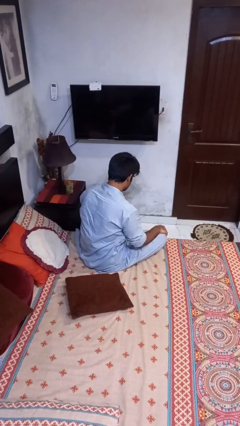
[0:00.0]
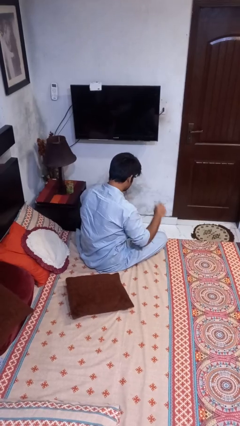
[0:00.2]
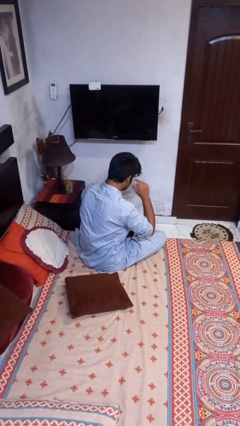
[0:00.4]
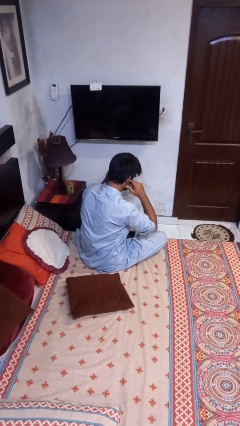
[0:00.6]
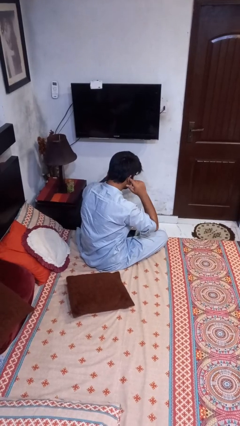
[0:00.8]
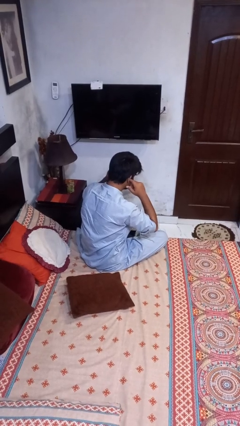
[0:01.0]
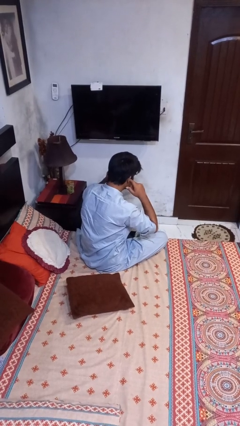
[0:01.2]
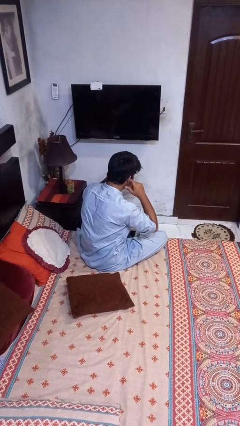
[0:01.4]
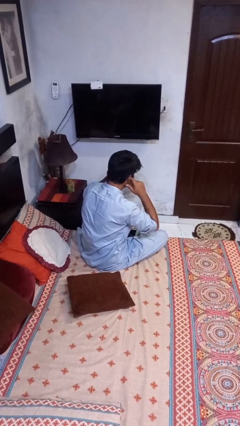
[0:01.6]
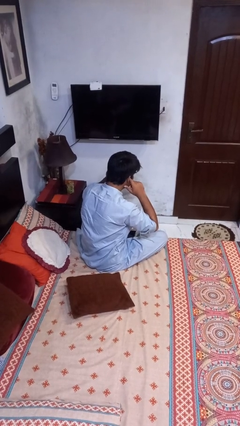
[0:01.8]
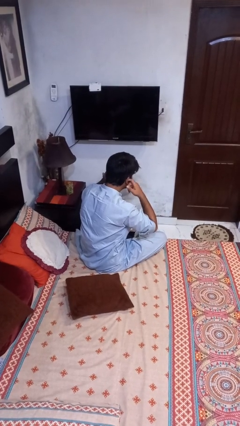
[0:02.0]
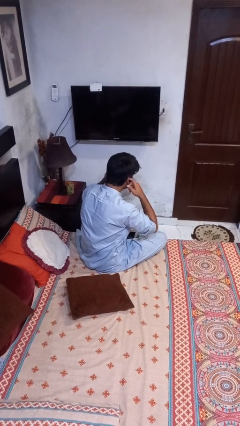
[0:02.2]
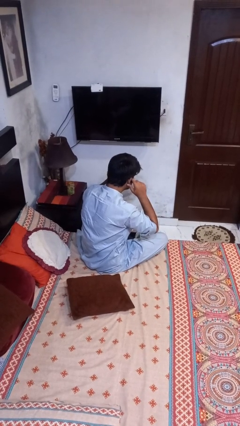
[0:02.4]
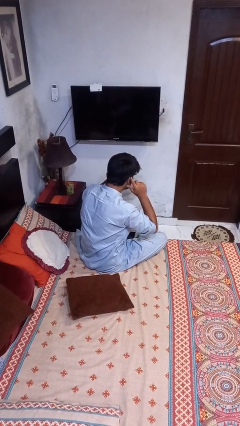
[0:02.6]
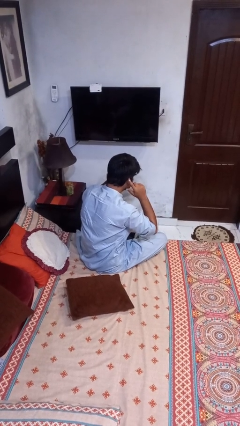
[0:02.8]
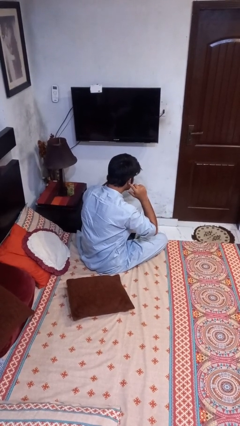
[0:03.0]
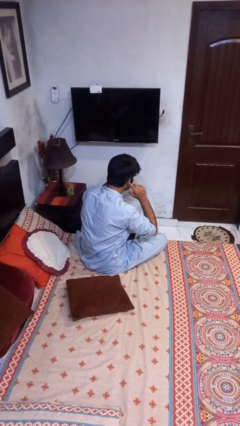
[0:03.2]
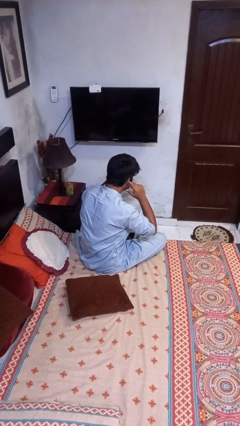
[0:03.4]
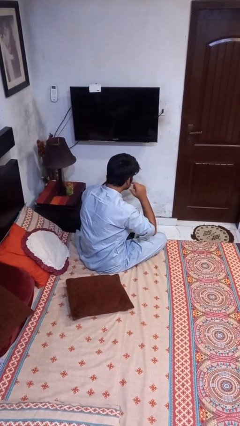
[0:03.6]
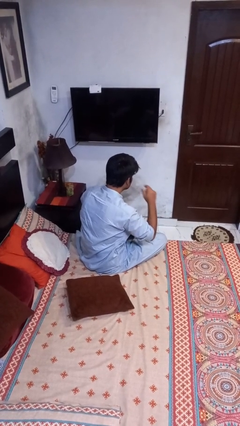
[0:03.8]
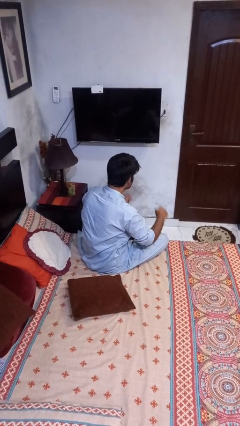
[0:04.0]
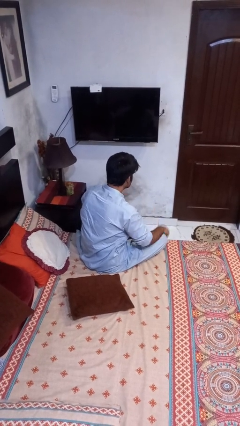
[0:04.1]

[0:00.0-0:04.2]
person puts fingers in ear

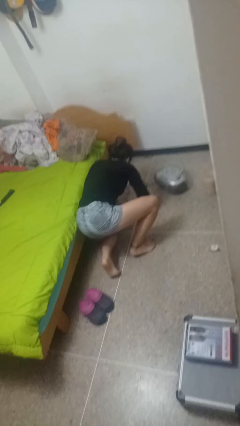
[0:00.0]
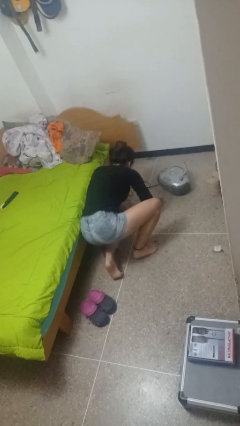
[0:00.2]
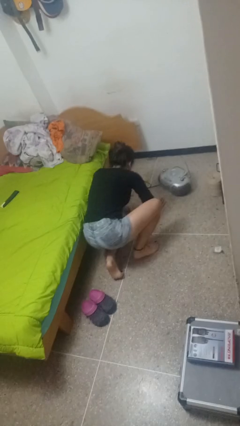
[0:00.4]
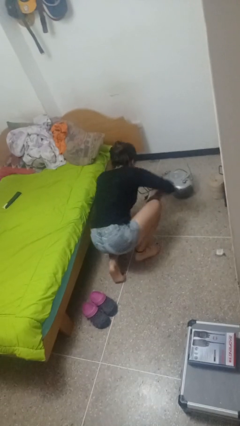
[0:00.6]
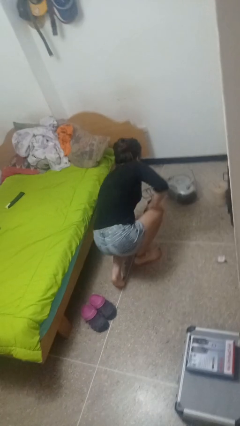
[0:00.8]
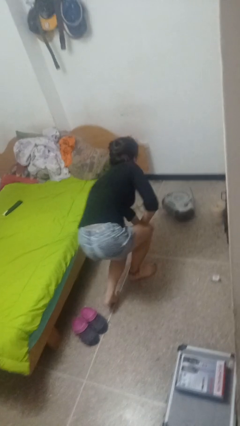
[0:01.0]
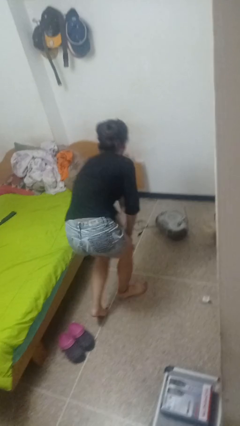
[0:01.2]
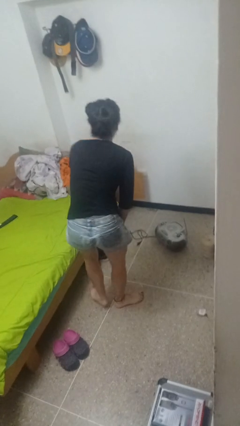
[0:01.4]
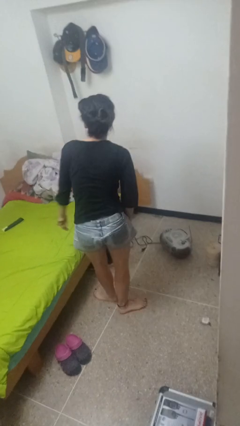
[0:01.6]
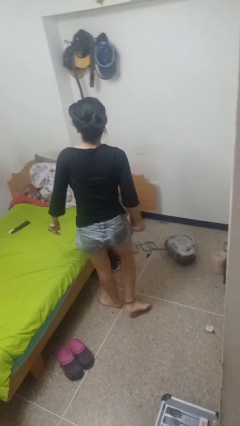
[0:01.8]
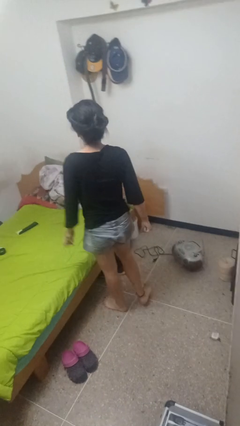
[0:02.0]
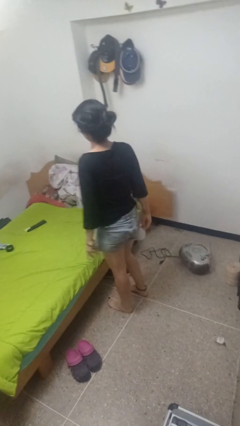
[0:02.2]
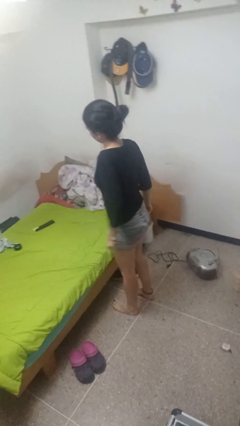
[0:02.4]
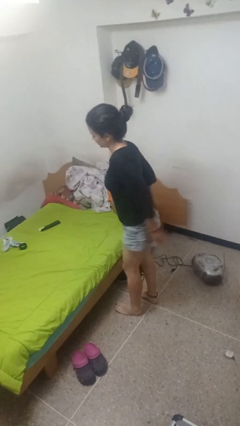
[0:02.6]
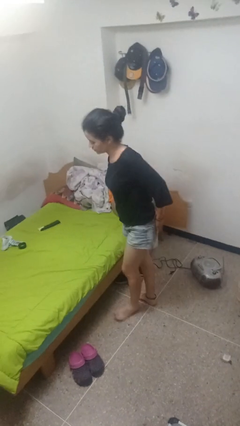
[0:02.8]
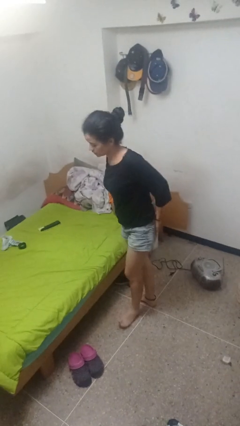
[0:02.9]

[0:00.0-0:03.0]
person stands up from floor

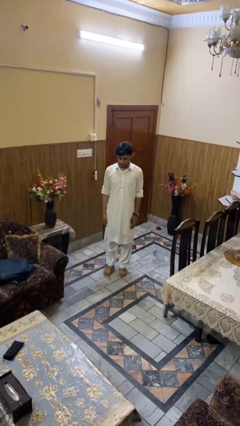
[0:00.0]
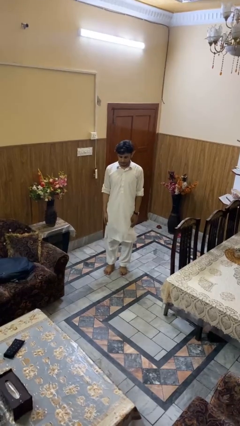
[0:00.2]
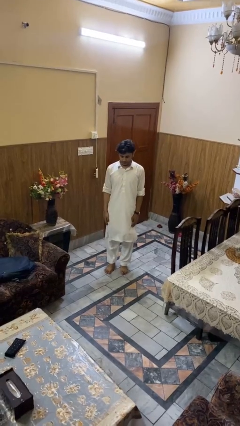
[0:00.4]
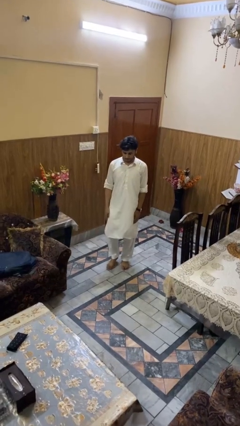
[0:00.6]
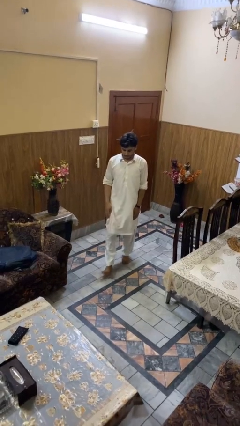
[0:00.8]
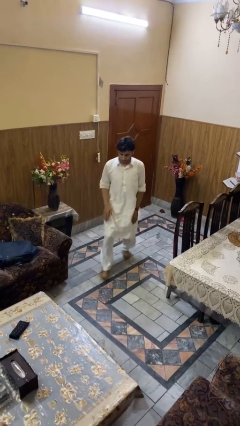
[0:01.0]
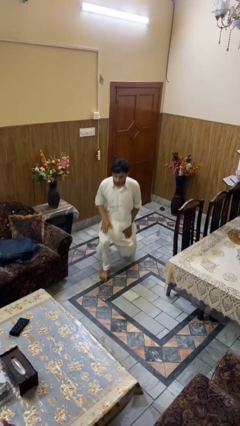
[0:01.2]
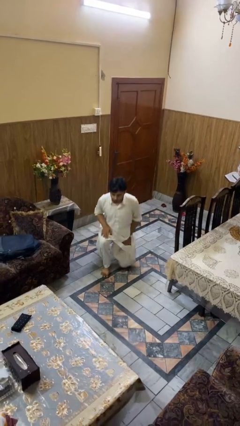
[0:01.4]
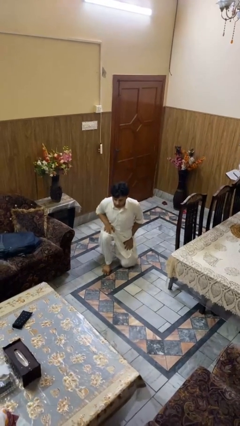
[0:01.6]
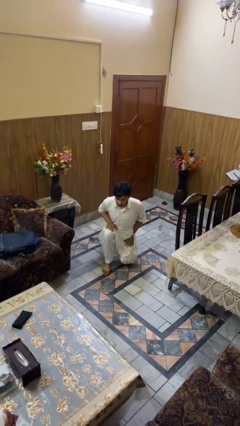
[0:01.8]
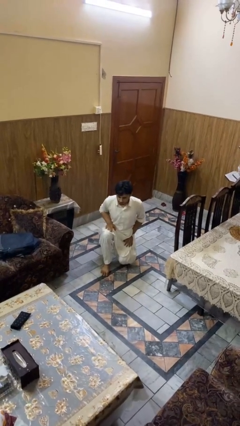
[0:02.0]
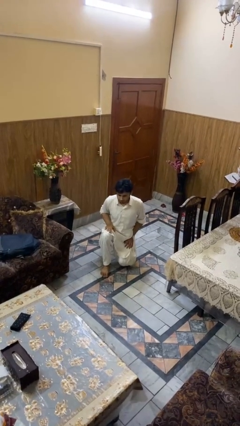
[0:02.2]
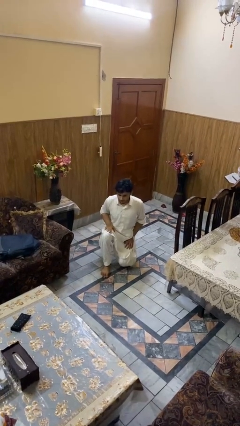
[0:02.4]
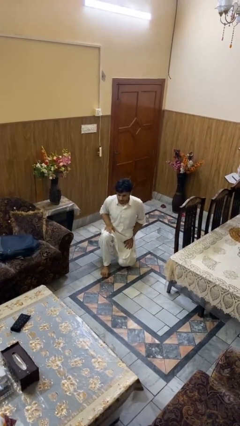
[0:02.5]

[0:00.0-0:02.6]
person kneels

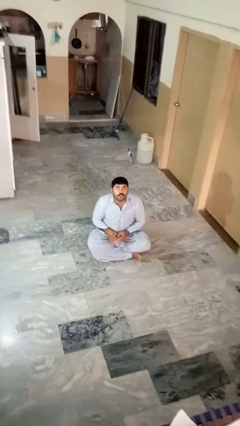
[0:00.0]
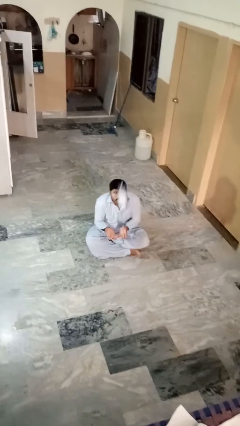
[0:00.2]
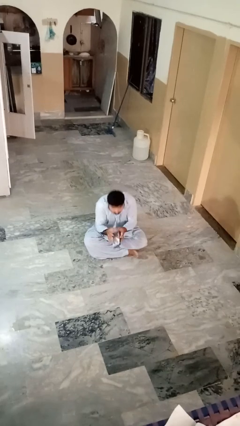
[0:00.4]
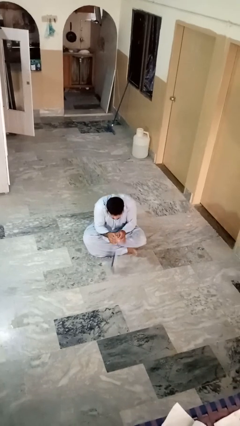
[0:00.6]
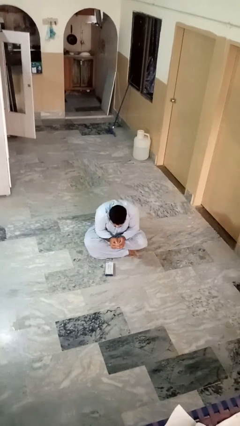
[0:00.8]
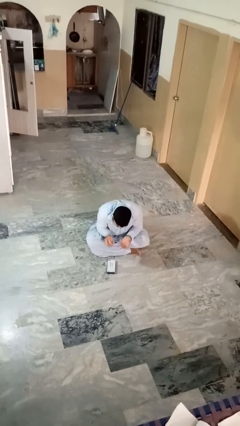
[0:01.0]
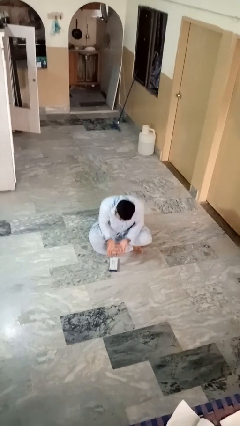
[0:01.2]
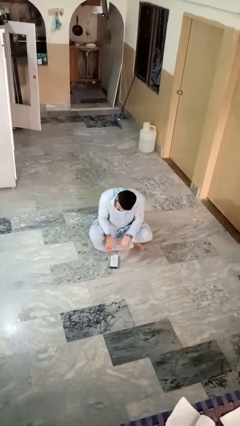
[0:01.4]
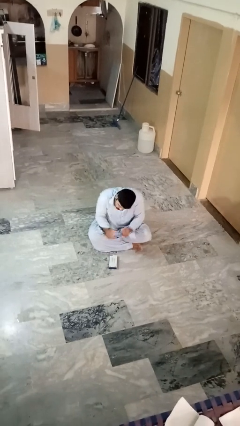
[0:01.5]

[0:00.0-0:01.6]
person catches dropped object

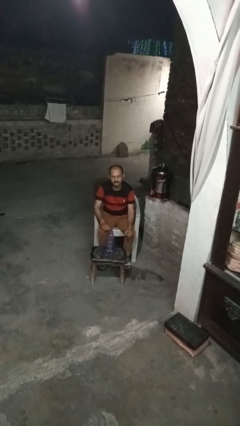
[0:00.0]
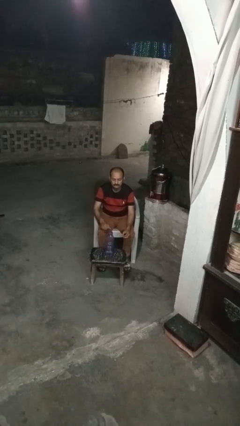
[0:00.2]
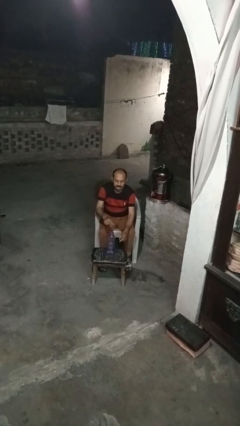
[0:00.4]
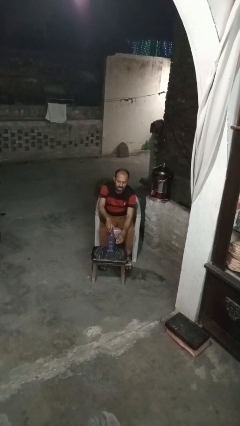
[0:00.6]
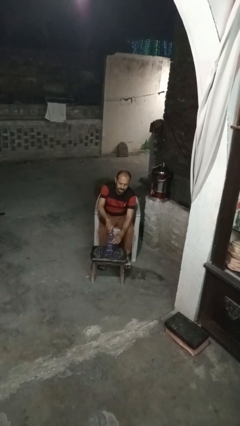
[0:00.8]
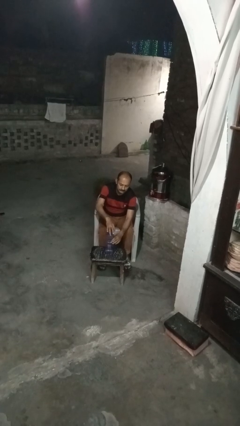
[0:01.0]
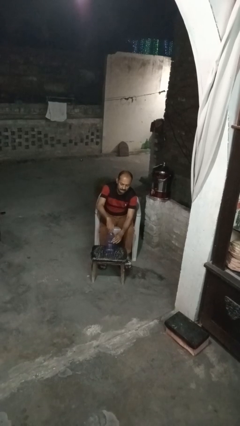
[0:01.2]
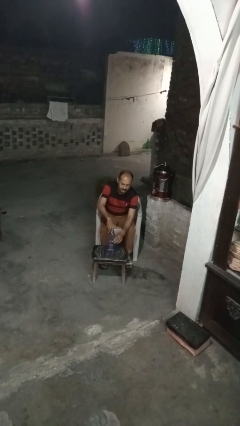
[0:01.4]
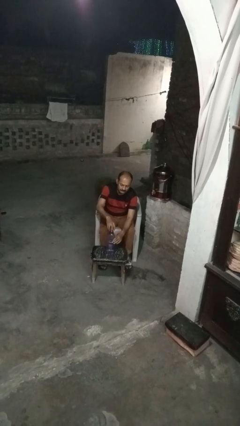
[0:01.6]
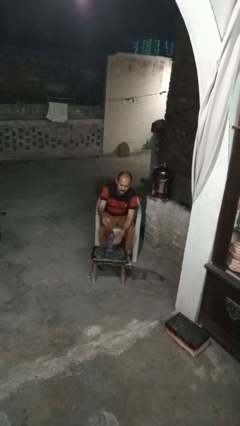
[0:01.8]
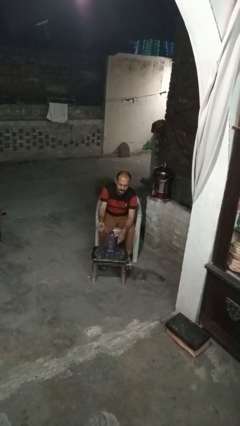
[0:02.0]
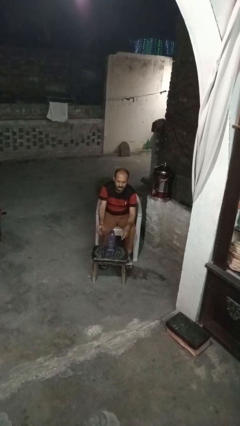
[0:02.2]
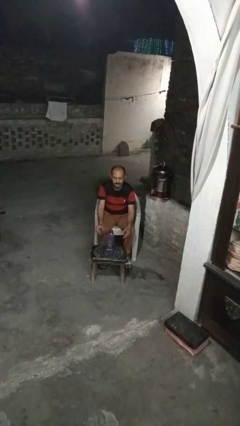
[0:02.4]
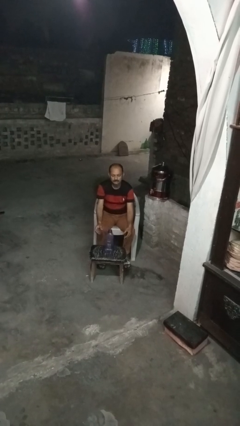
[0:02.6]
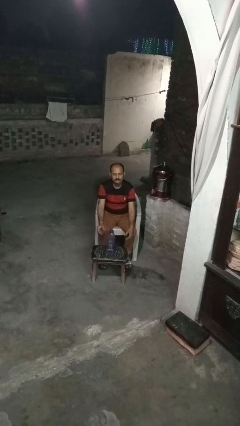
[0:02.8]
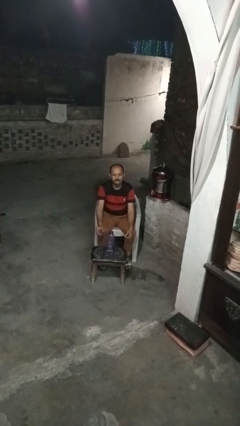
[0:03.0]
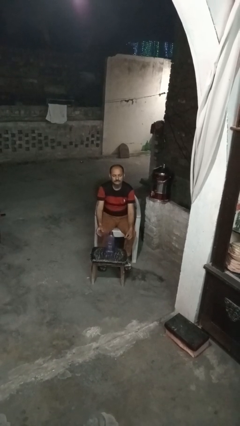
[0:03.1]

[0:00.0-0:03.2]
person unscrews lid from bottle

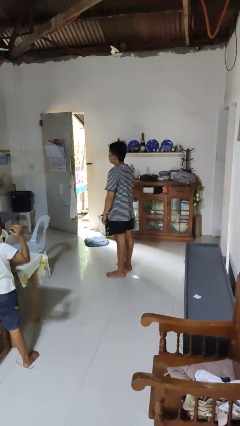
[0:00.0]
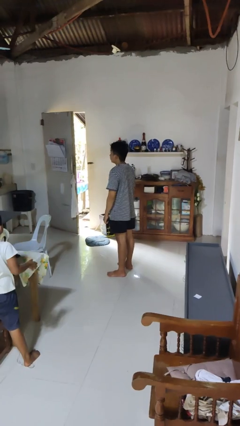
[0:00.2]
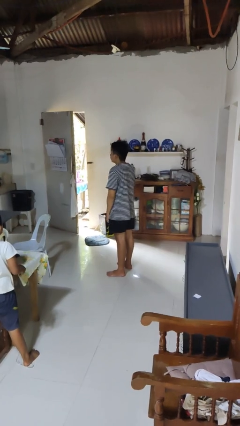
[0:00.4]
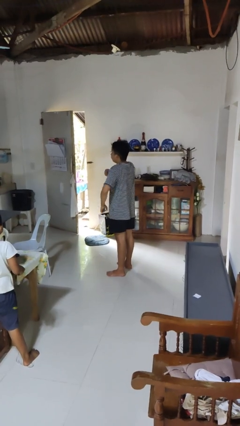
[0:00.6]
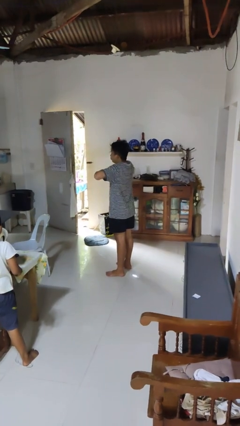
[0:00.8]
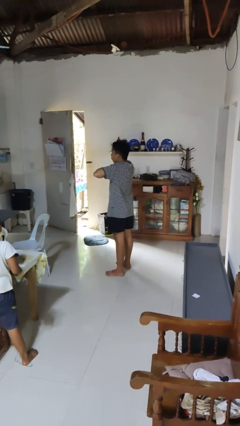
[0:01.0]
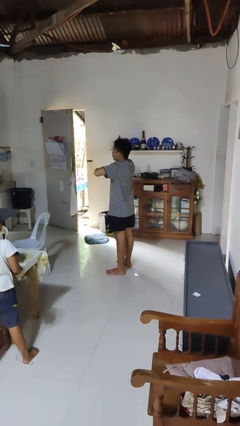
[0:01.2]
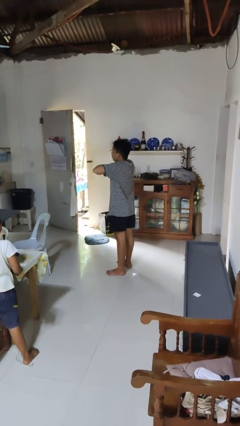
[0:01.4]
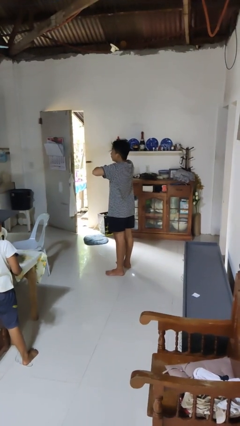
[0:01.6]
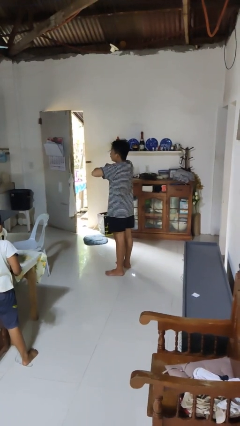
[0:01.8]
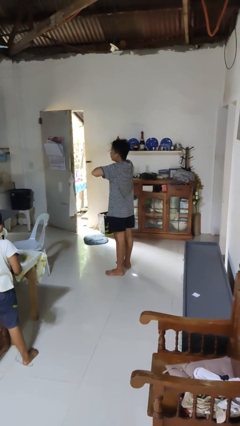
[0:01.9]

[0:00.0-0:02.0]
person drums on chest

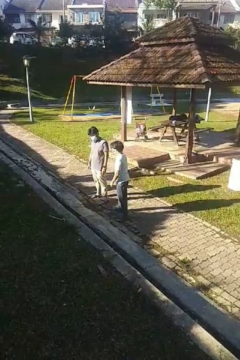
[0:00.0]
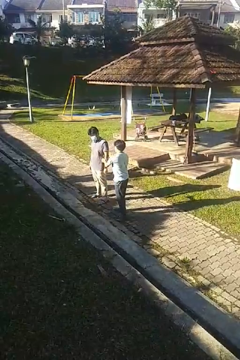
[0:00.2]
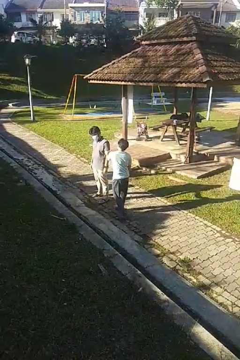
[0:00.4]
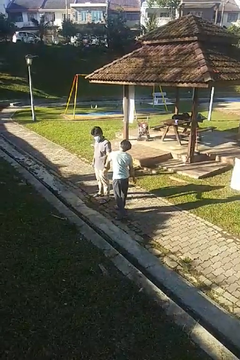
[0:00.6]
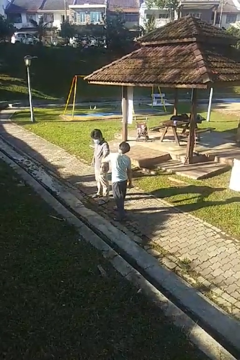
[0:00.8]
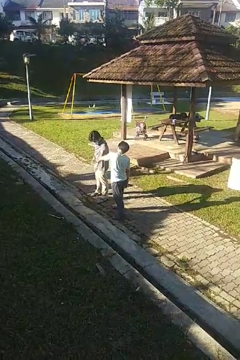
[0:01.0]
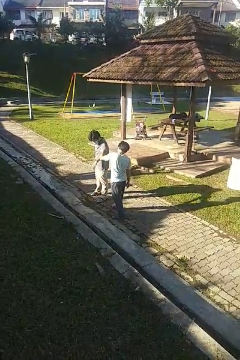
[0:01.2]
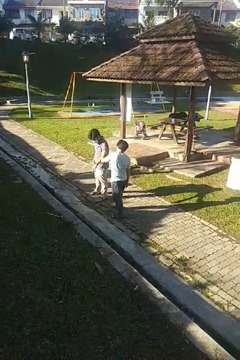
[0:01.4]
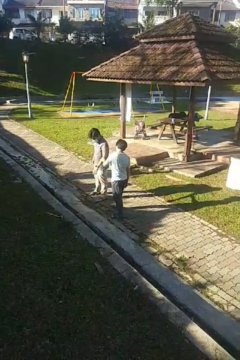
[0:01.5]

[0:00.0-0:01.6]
person grabs person by bicep
